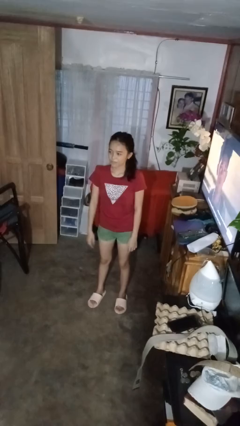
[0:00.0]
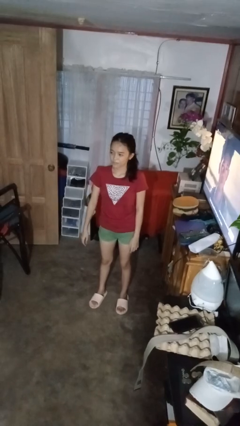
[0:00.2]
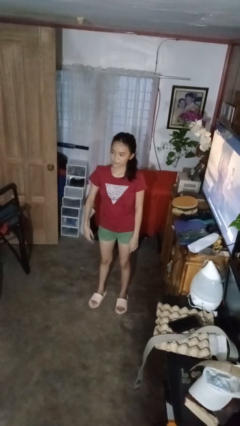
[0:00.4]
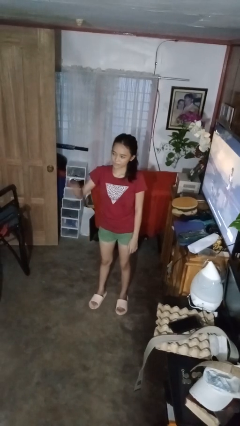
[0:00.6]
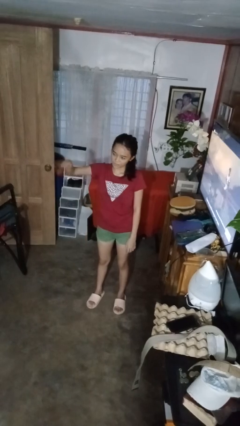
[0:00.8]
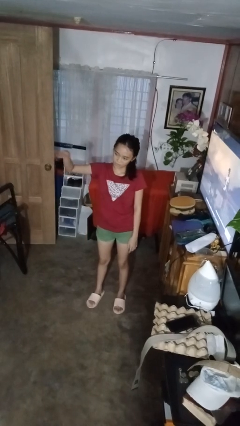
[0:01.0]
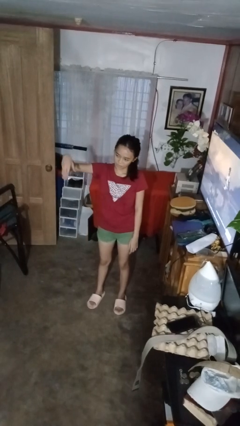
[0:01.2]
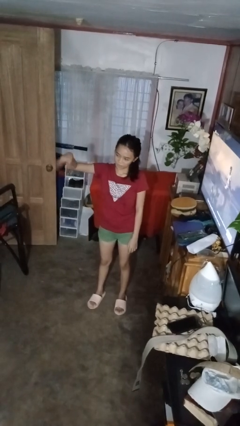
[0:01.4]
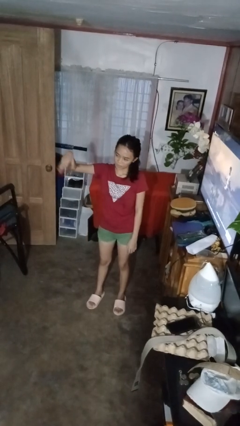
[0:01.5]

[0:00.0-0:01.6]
person gestures come here

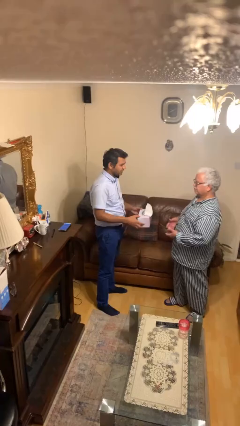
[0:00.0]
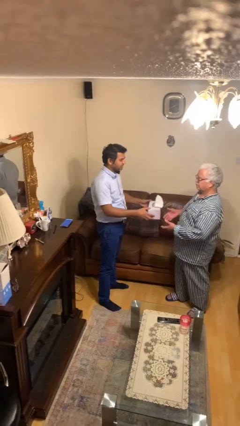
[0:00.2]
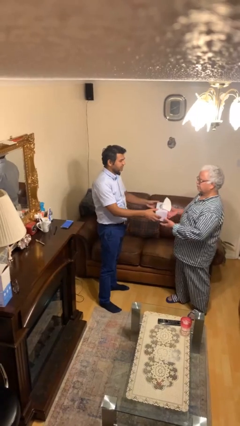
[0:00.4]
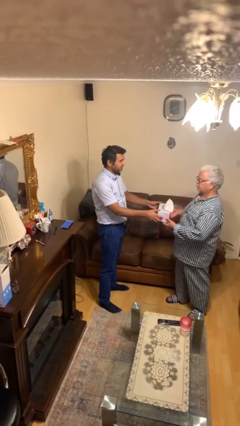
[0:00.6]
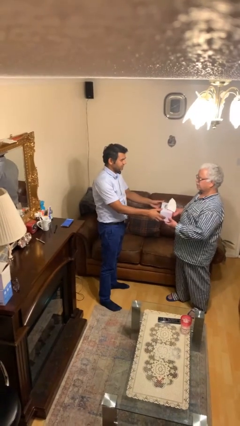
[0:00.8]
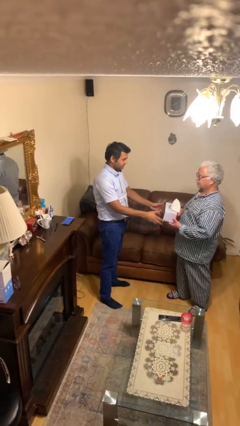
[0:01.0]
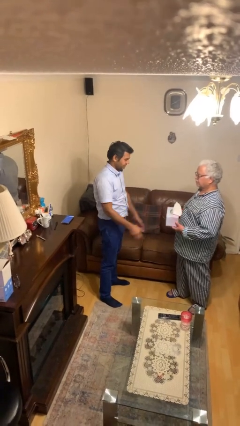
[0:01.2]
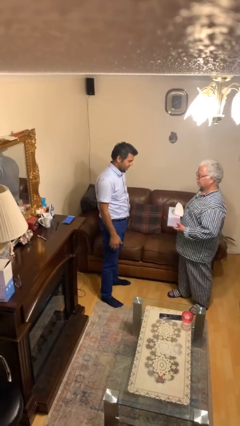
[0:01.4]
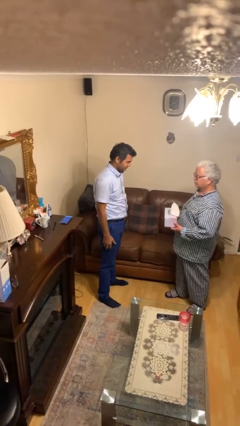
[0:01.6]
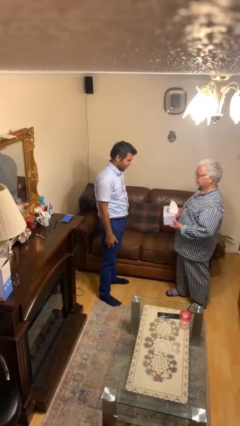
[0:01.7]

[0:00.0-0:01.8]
person transfers object to person

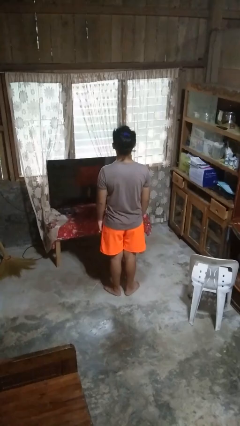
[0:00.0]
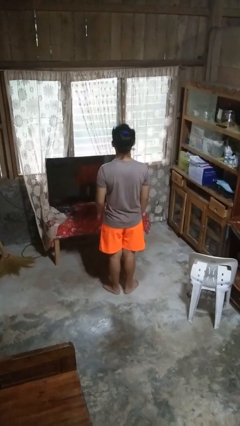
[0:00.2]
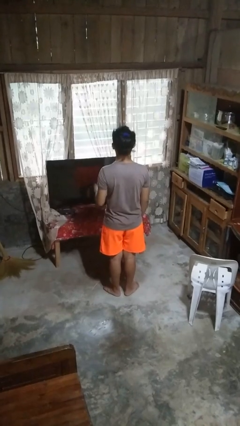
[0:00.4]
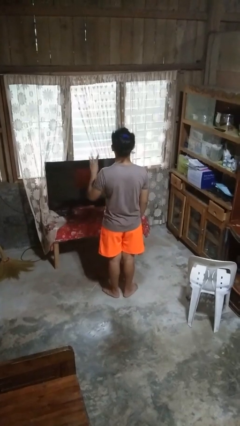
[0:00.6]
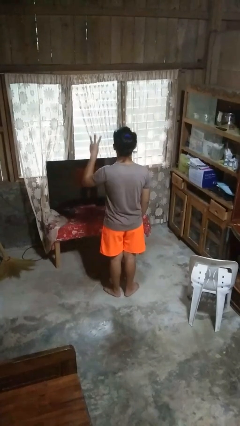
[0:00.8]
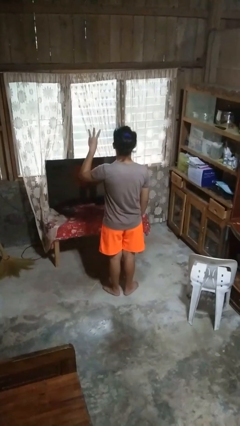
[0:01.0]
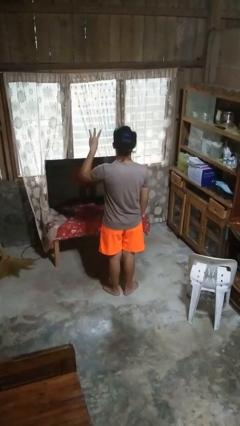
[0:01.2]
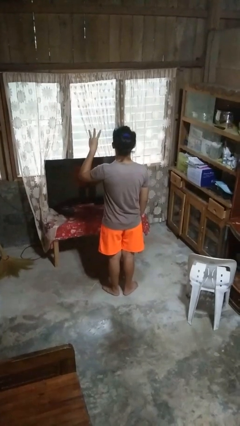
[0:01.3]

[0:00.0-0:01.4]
person gestures number three

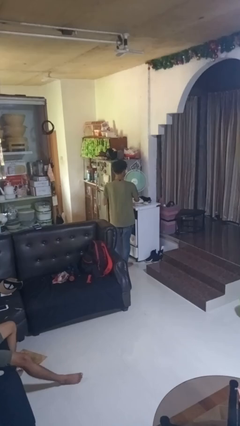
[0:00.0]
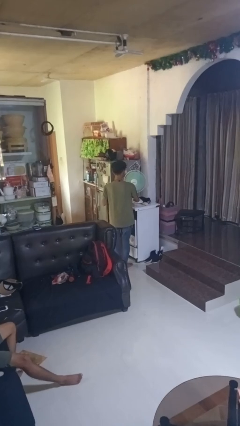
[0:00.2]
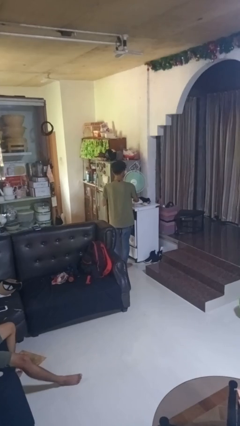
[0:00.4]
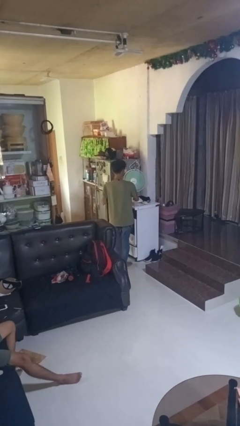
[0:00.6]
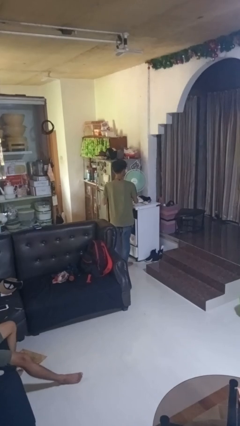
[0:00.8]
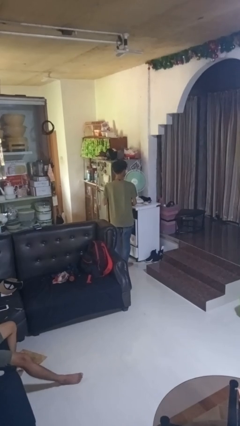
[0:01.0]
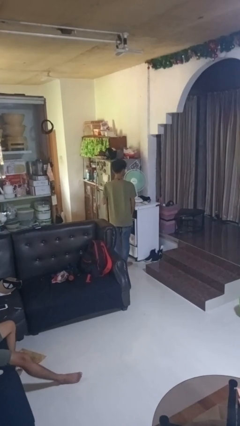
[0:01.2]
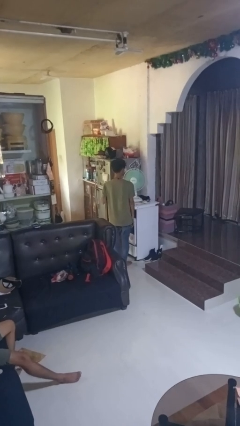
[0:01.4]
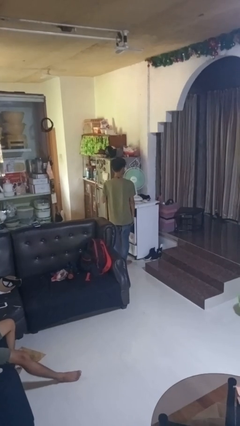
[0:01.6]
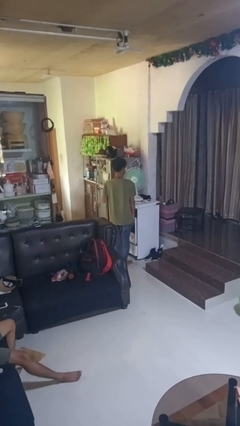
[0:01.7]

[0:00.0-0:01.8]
person turns off fan

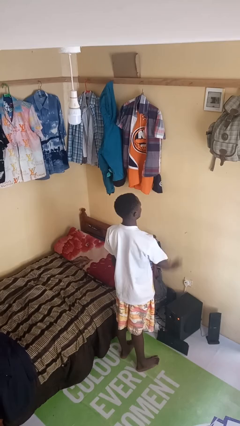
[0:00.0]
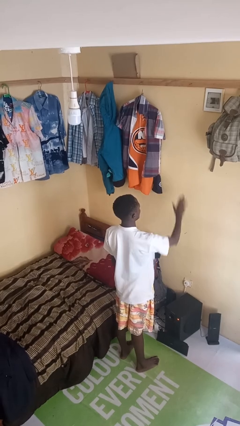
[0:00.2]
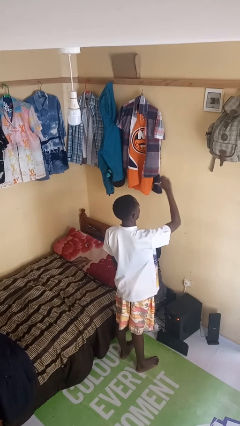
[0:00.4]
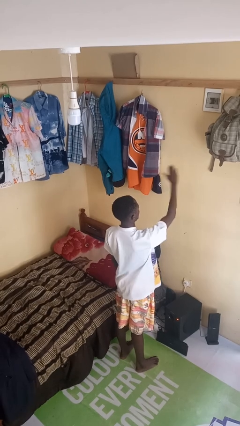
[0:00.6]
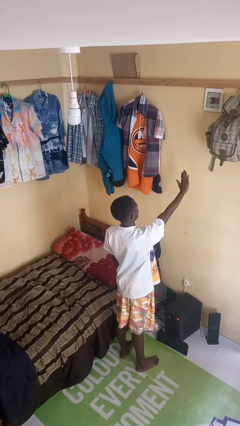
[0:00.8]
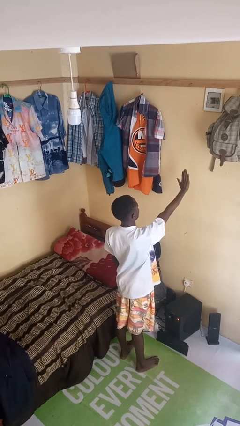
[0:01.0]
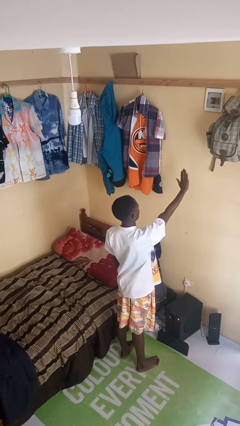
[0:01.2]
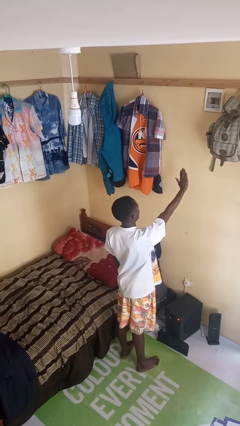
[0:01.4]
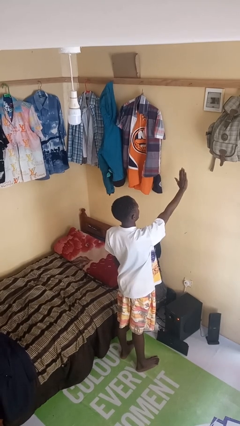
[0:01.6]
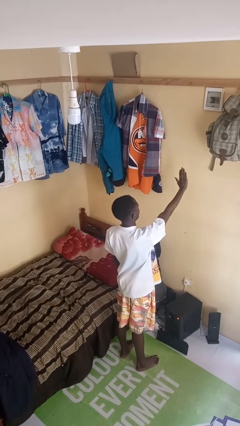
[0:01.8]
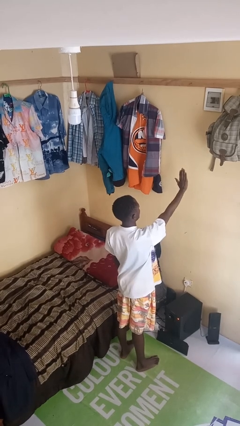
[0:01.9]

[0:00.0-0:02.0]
person gestures stop

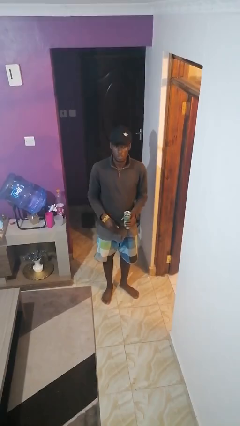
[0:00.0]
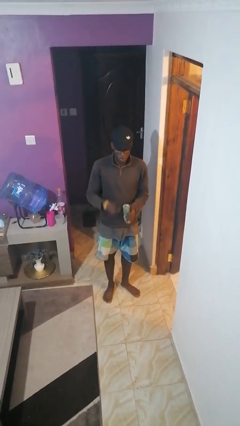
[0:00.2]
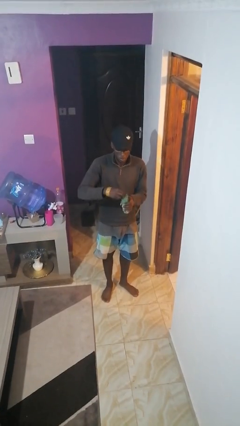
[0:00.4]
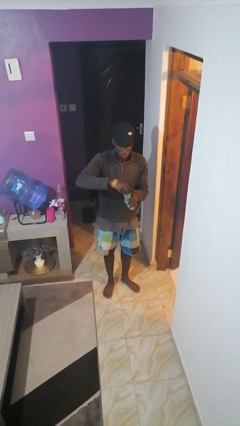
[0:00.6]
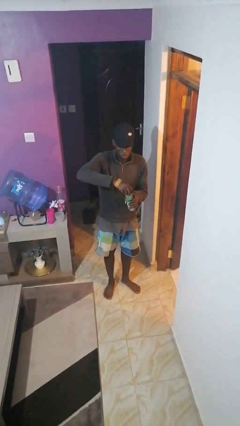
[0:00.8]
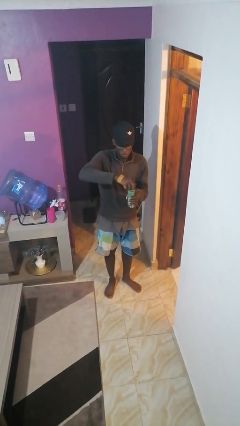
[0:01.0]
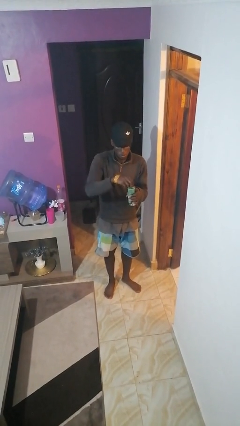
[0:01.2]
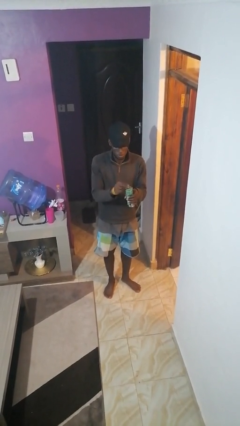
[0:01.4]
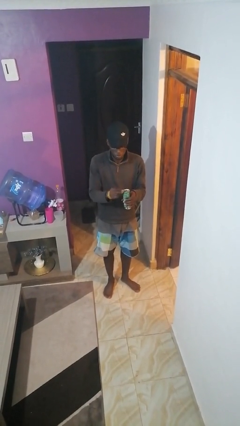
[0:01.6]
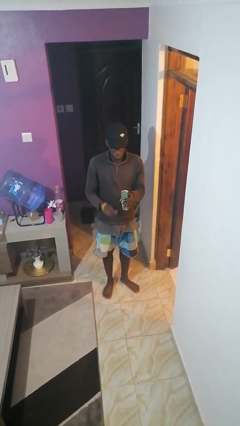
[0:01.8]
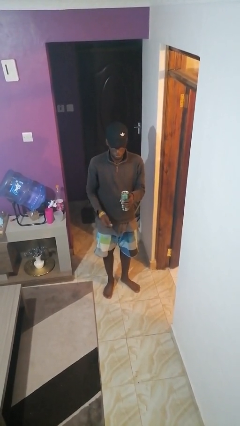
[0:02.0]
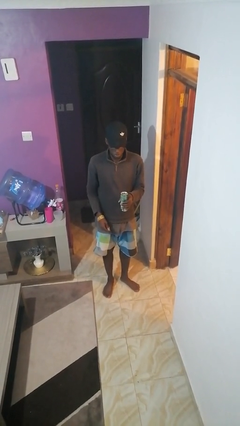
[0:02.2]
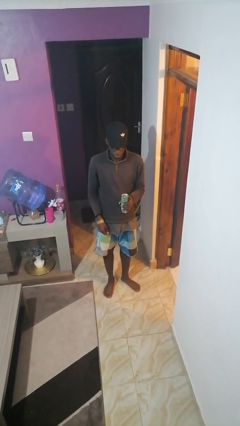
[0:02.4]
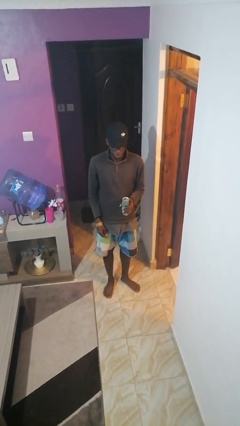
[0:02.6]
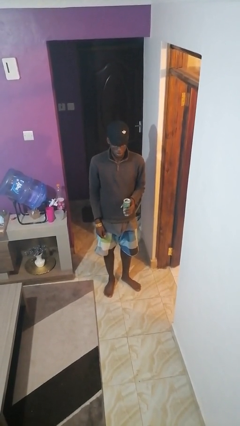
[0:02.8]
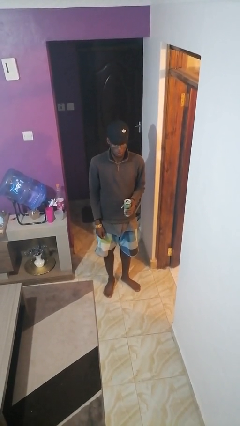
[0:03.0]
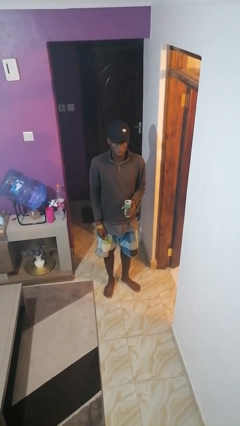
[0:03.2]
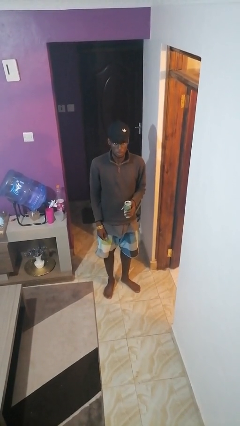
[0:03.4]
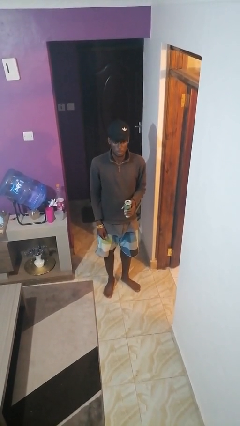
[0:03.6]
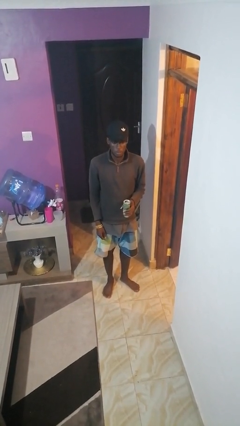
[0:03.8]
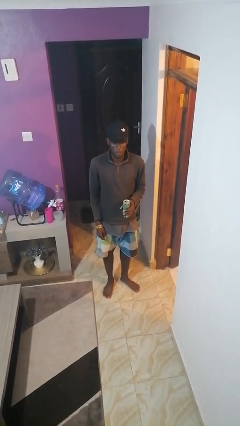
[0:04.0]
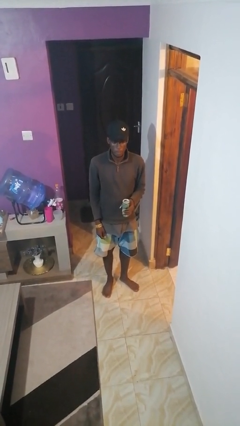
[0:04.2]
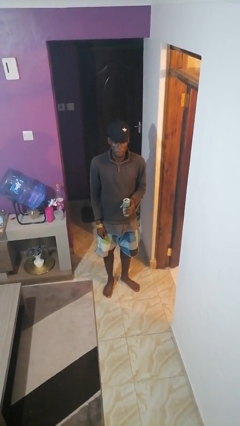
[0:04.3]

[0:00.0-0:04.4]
person opens beverage can

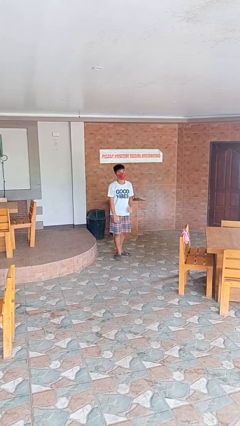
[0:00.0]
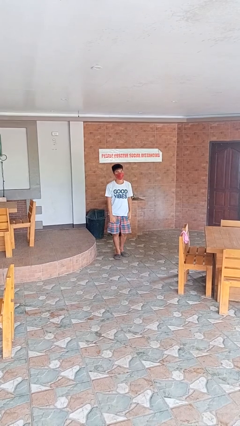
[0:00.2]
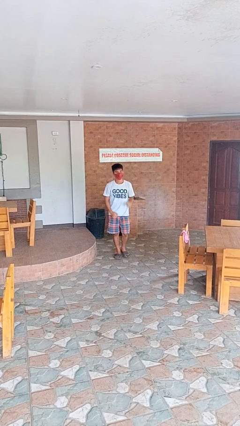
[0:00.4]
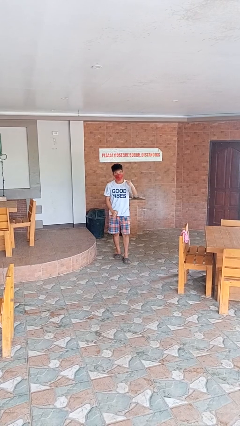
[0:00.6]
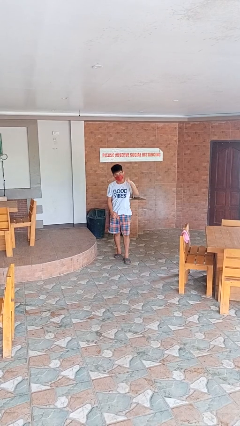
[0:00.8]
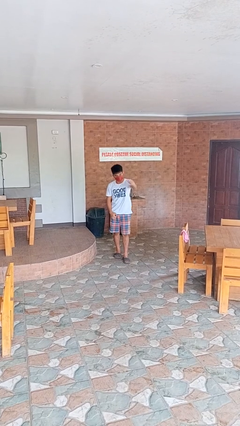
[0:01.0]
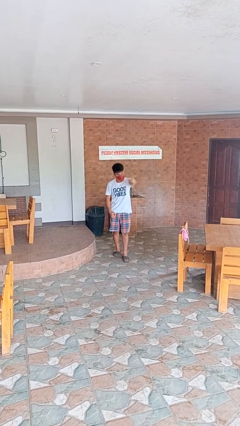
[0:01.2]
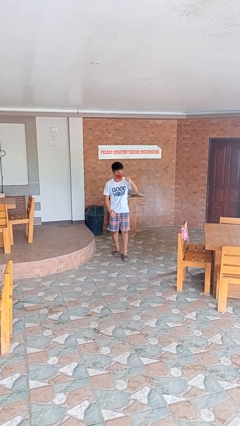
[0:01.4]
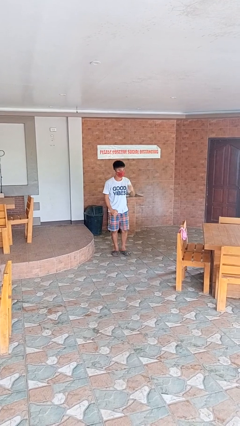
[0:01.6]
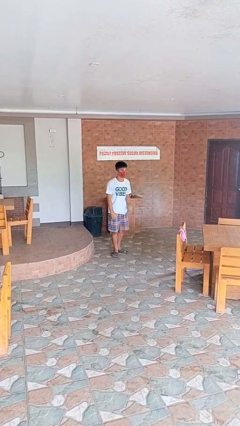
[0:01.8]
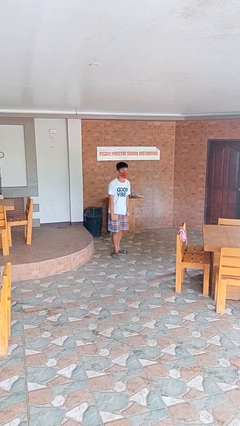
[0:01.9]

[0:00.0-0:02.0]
person punches

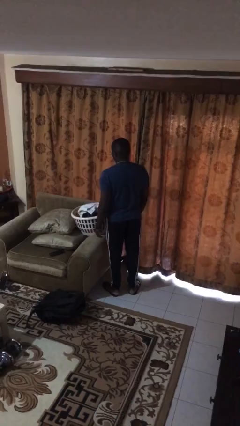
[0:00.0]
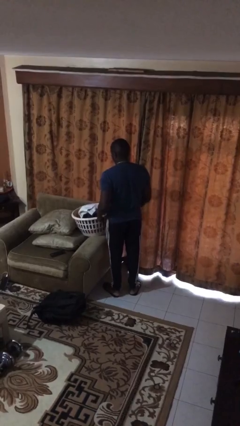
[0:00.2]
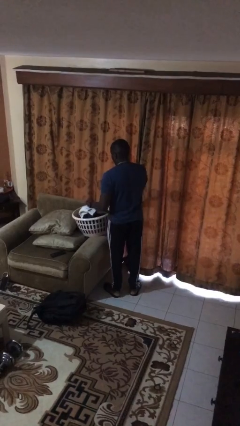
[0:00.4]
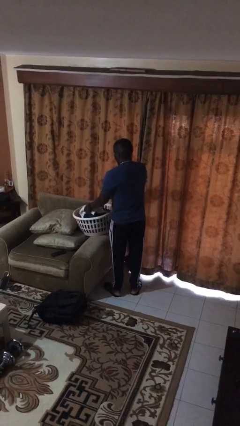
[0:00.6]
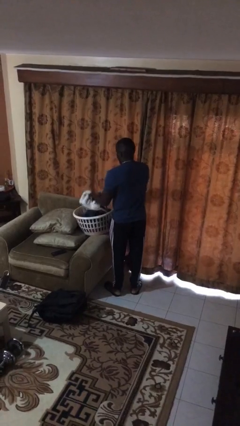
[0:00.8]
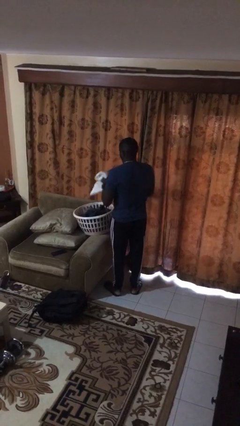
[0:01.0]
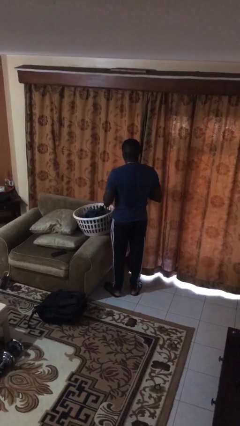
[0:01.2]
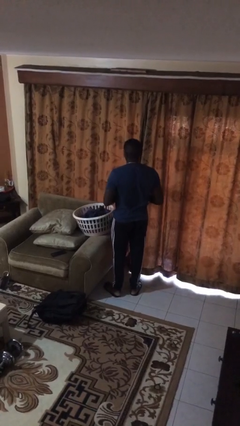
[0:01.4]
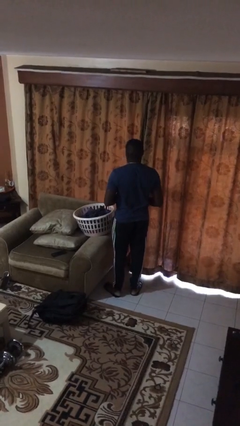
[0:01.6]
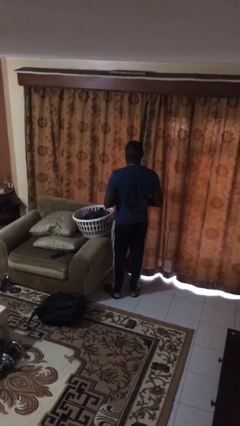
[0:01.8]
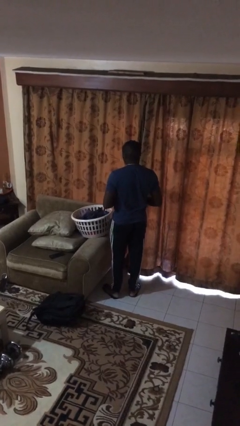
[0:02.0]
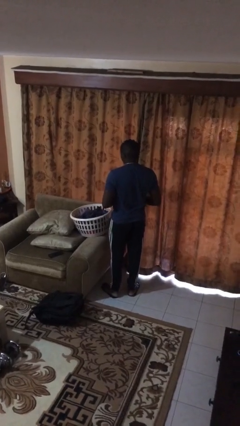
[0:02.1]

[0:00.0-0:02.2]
person takes object from basket
